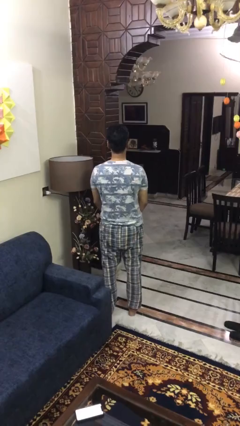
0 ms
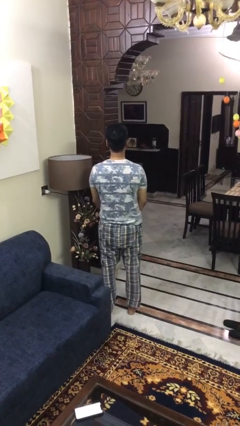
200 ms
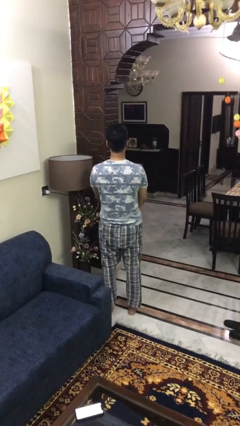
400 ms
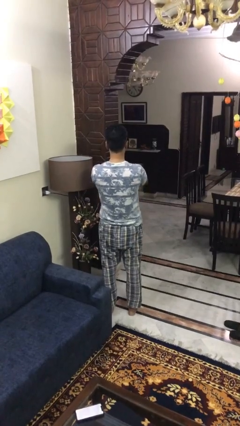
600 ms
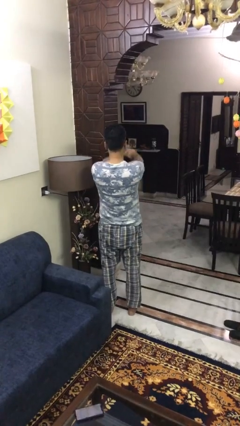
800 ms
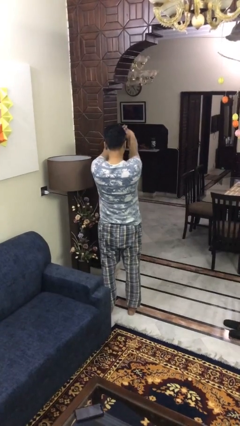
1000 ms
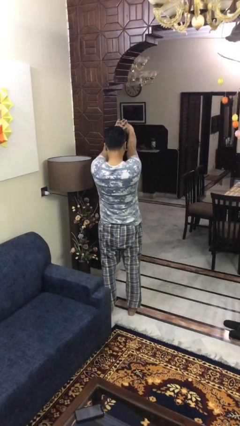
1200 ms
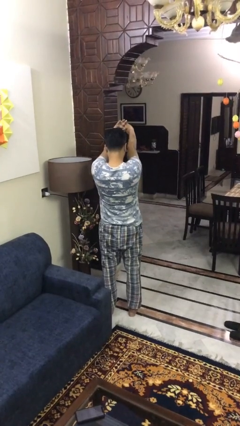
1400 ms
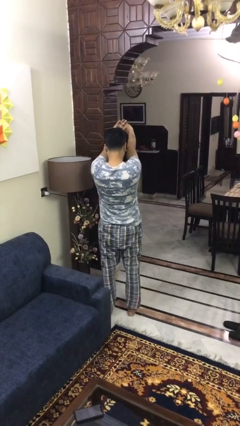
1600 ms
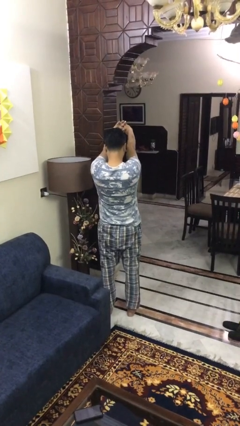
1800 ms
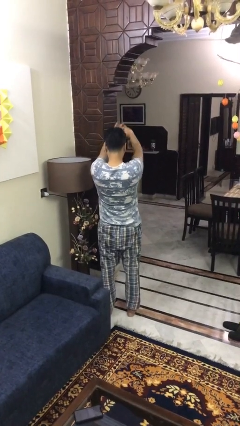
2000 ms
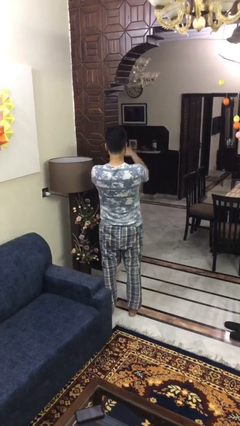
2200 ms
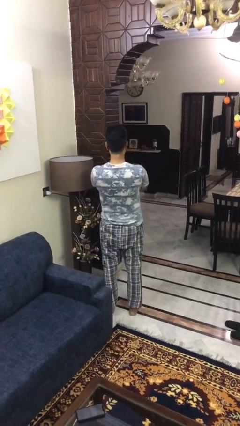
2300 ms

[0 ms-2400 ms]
person cracks knuckles

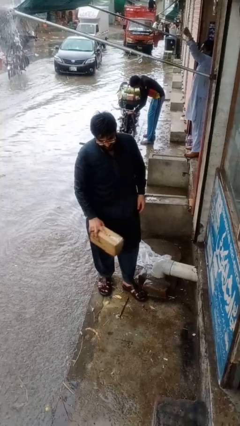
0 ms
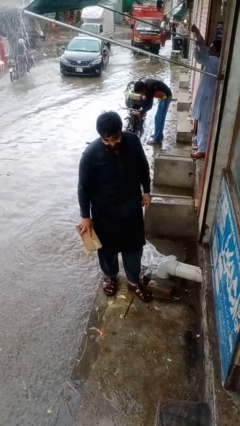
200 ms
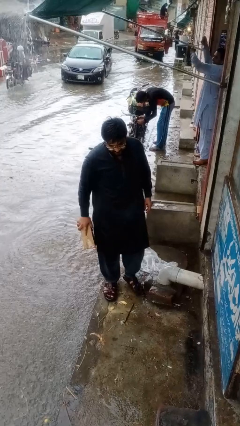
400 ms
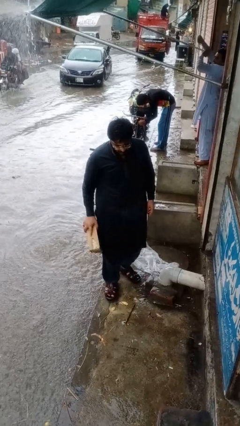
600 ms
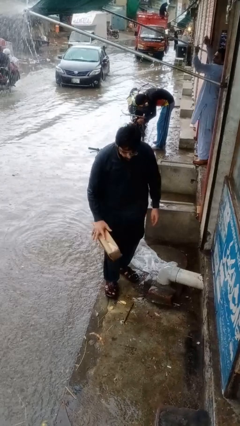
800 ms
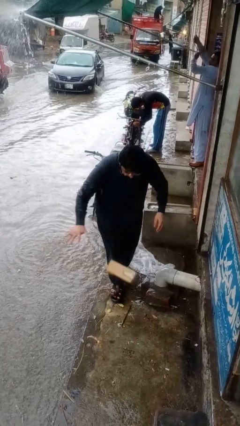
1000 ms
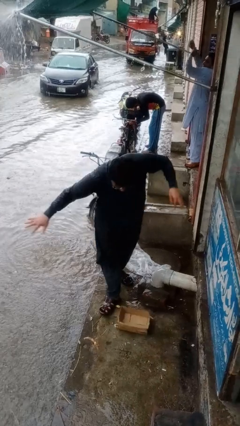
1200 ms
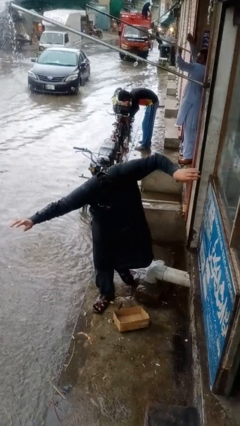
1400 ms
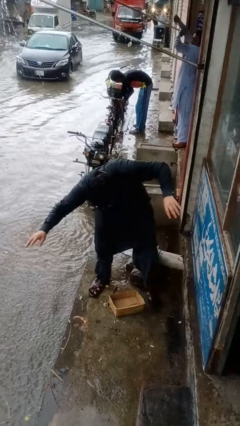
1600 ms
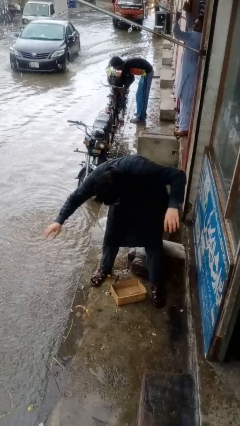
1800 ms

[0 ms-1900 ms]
person drops object

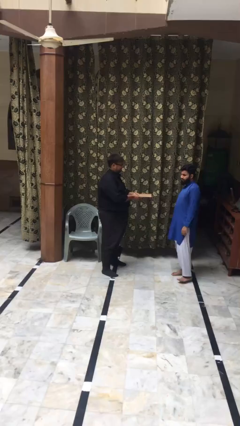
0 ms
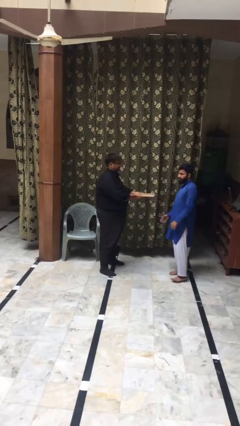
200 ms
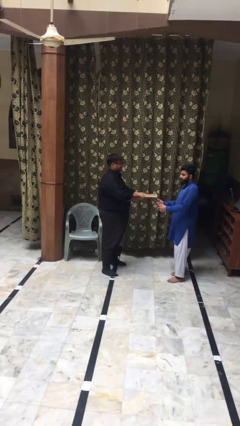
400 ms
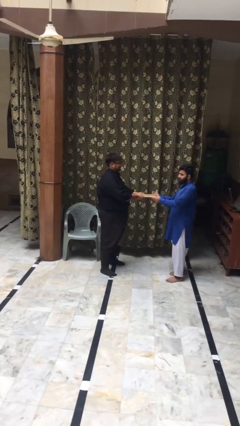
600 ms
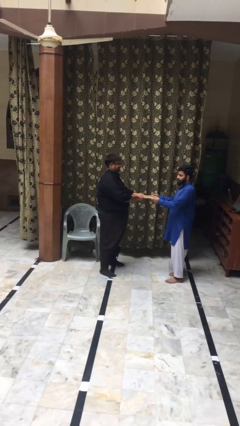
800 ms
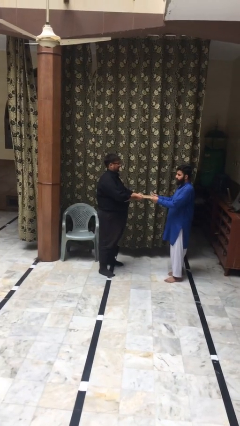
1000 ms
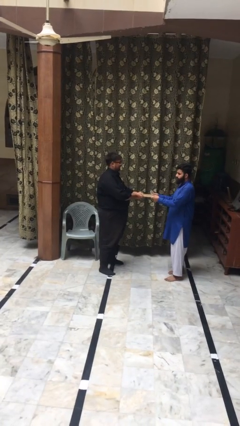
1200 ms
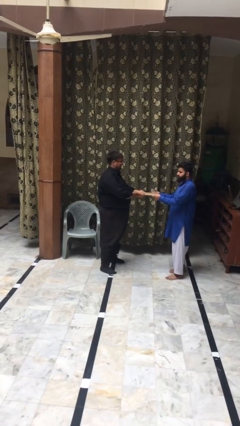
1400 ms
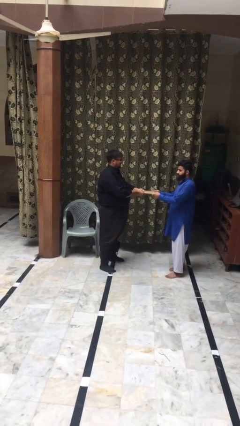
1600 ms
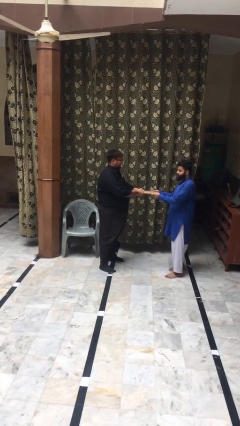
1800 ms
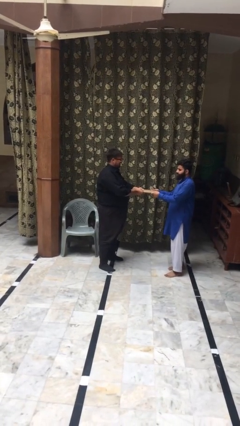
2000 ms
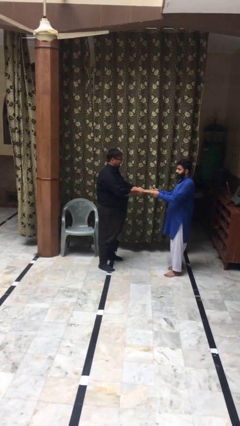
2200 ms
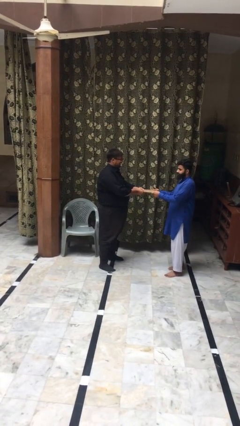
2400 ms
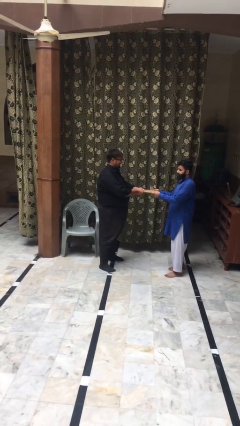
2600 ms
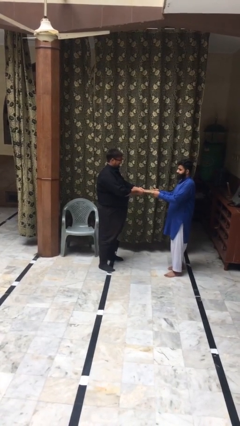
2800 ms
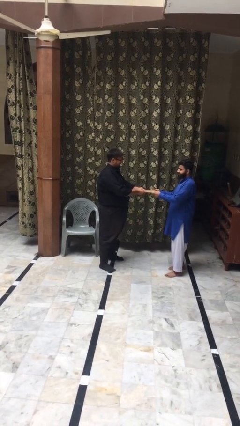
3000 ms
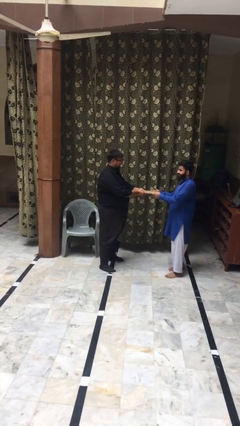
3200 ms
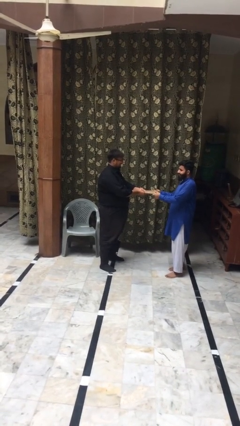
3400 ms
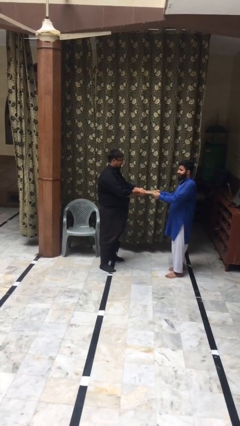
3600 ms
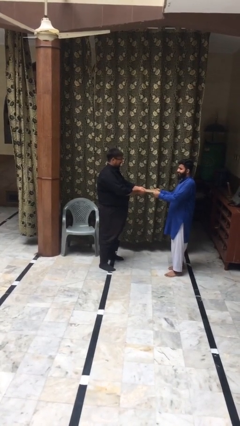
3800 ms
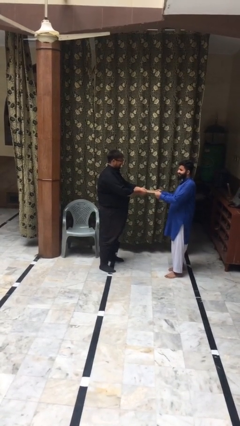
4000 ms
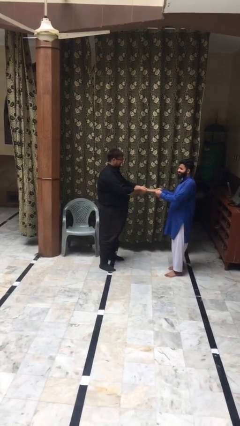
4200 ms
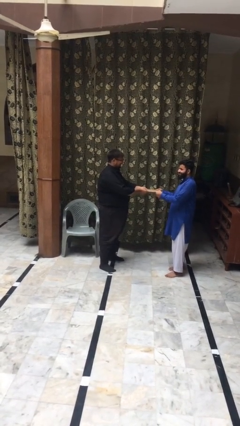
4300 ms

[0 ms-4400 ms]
person transfers object to person

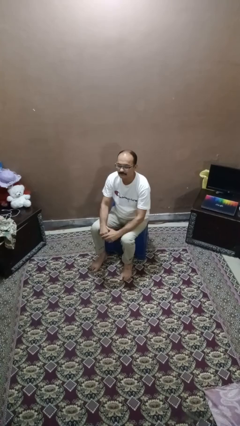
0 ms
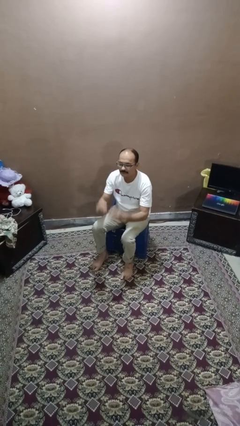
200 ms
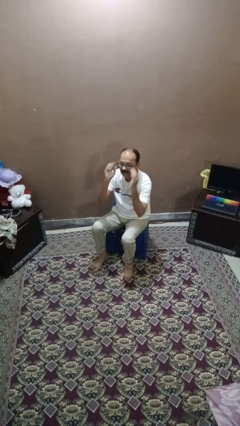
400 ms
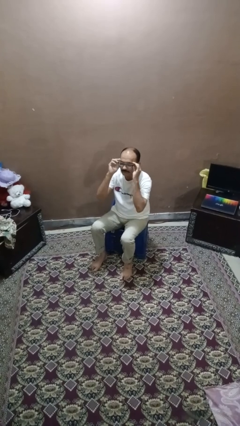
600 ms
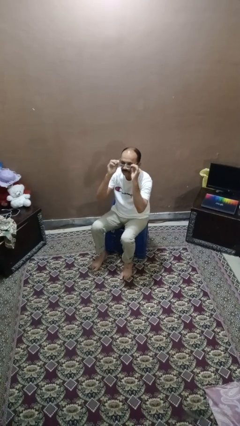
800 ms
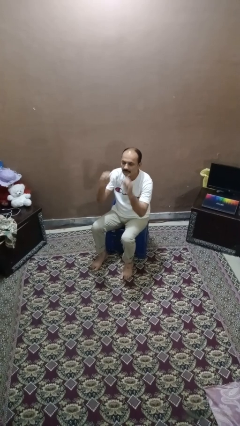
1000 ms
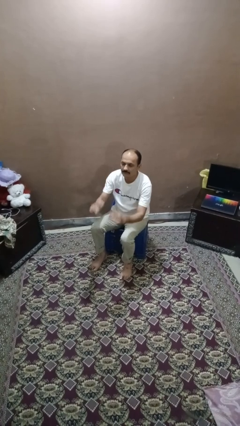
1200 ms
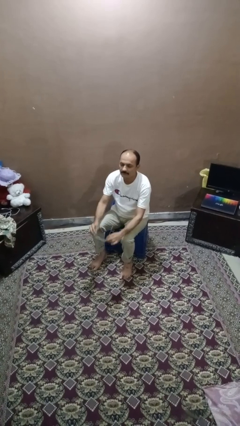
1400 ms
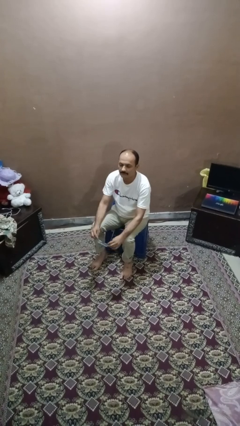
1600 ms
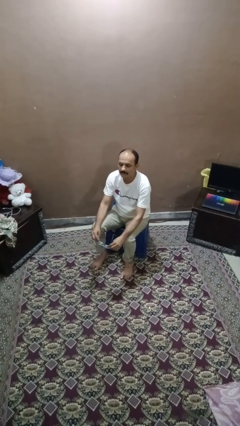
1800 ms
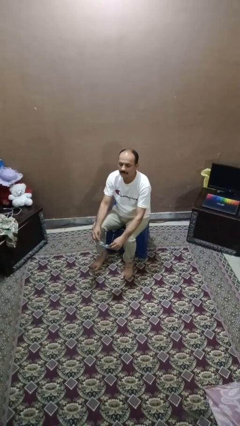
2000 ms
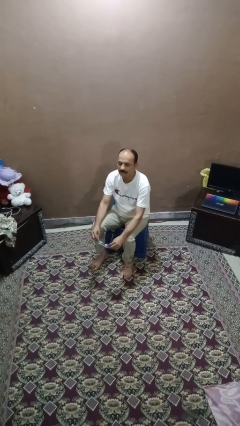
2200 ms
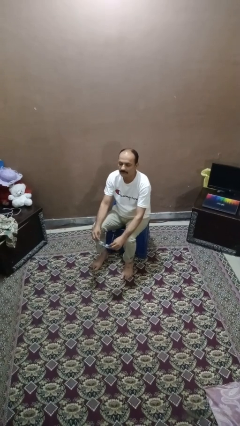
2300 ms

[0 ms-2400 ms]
person takes off glasses

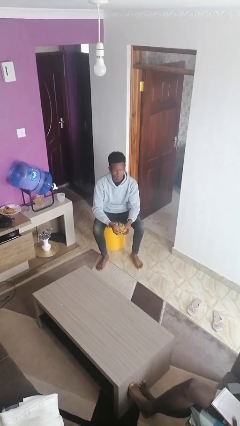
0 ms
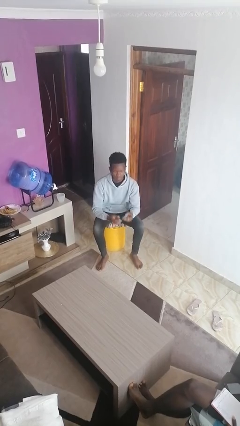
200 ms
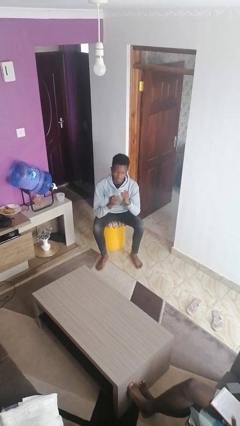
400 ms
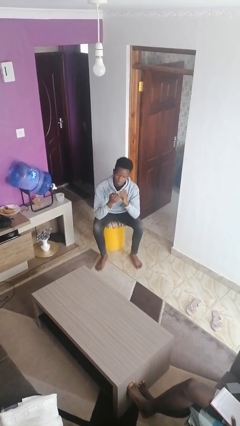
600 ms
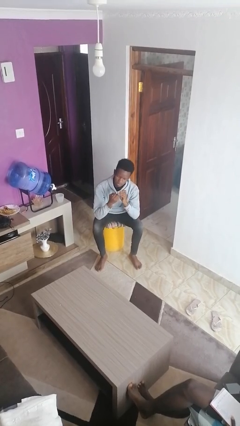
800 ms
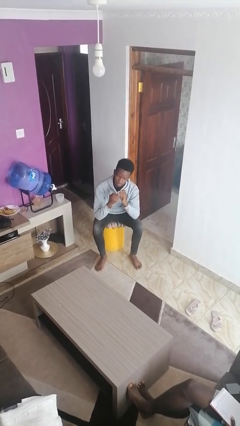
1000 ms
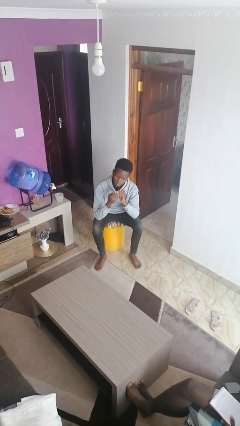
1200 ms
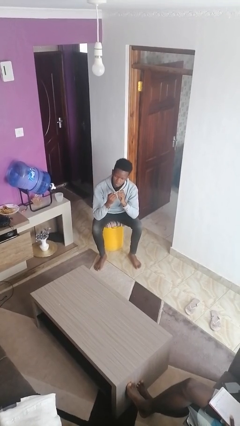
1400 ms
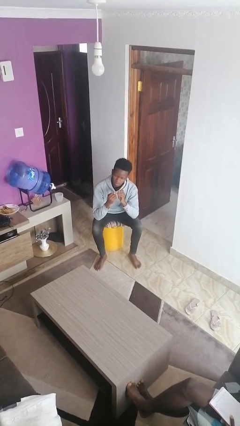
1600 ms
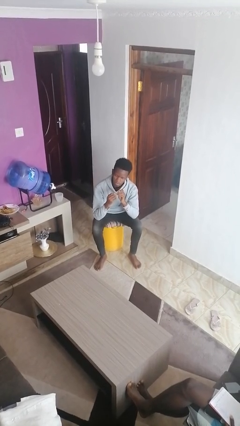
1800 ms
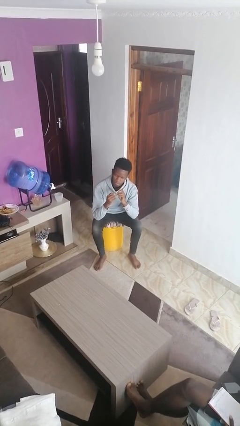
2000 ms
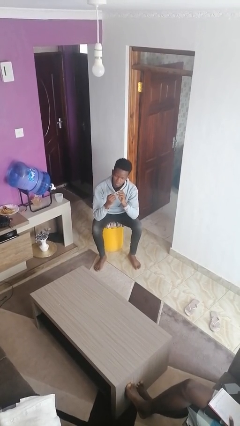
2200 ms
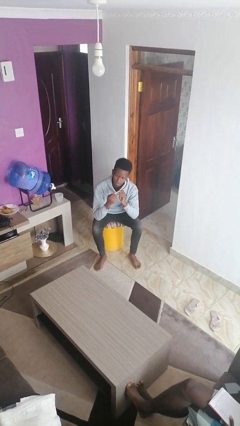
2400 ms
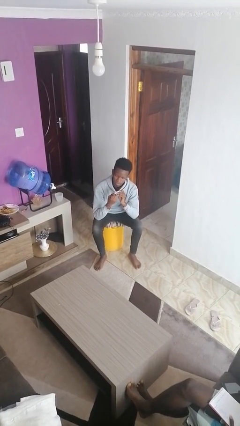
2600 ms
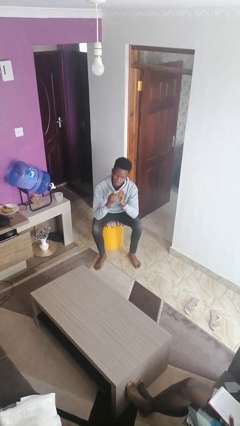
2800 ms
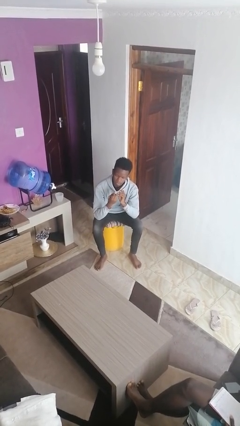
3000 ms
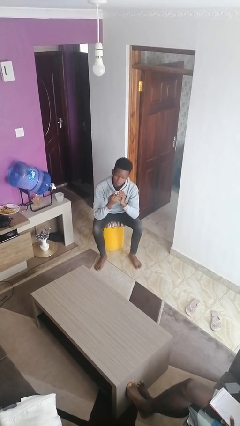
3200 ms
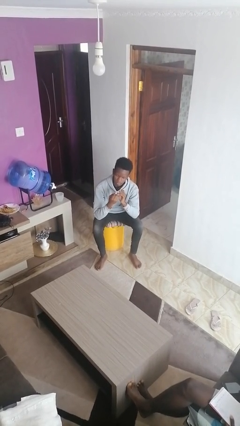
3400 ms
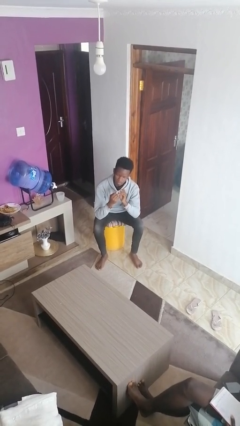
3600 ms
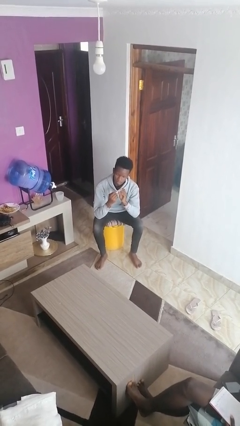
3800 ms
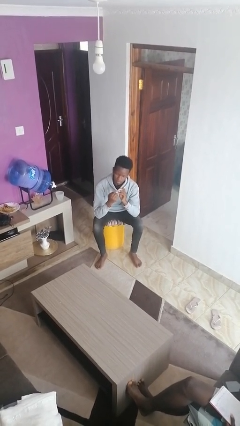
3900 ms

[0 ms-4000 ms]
person clips fingernails

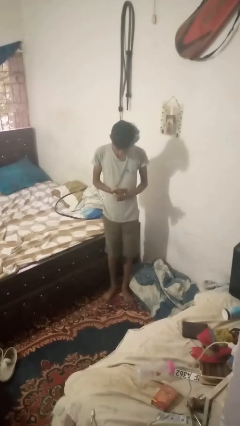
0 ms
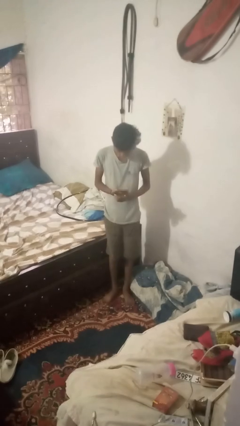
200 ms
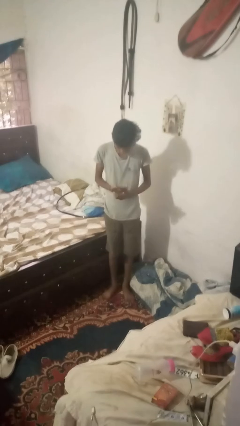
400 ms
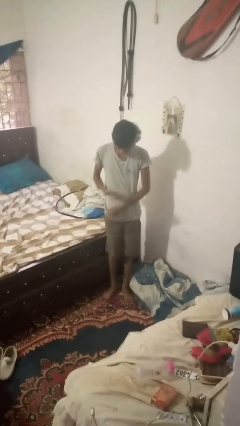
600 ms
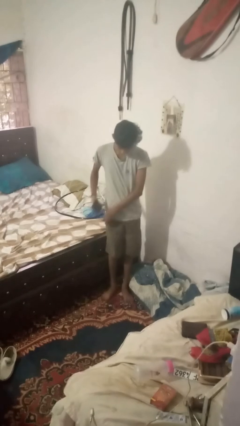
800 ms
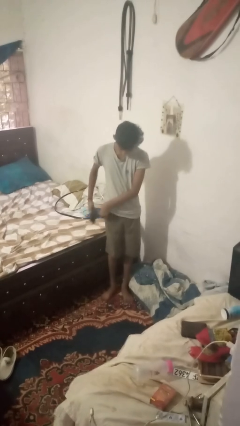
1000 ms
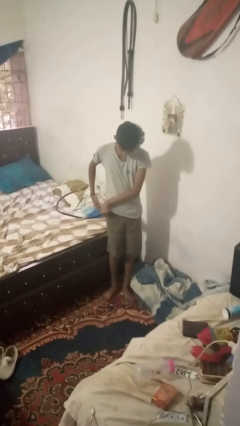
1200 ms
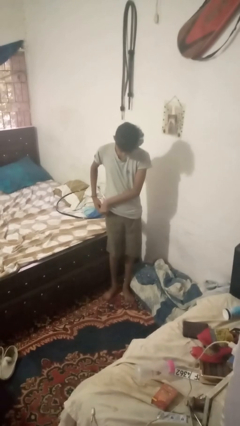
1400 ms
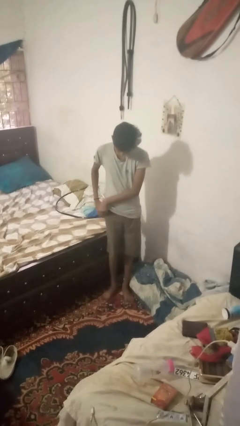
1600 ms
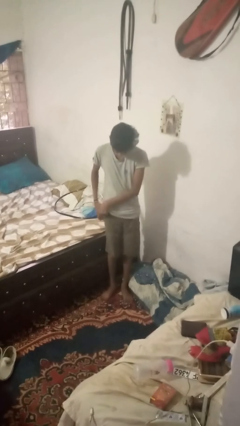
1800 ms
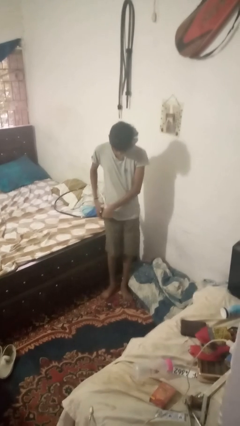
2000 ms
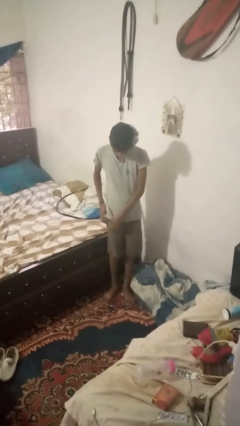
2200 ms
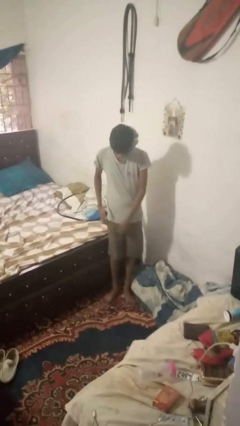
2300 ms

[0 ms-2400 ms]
person puts phone into pocket
